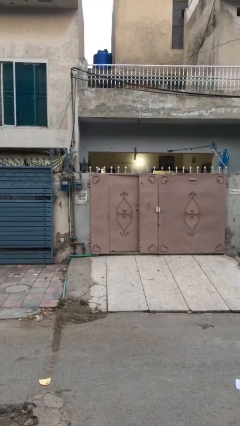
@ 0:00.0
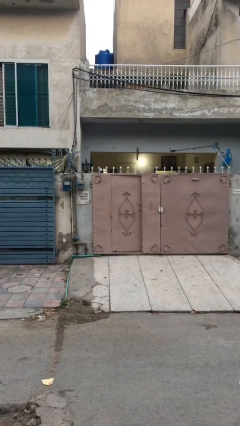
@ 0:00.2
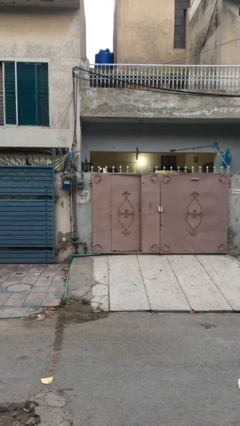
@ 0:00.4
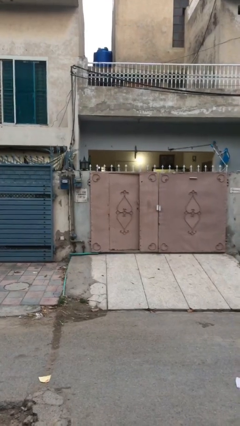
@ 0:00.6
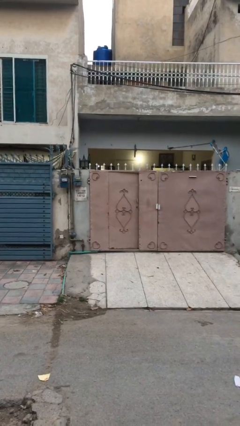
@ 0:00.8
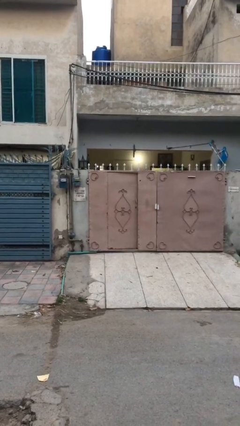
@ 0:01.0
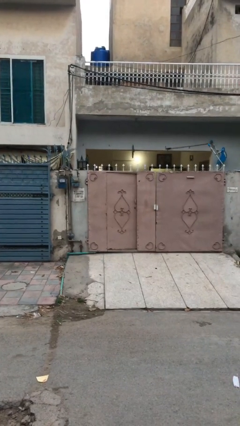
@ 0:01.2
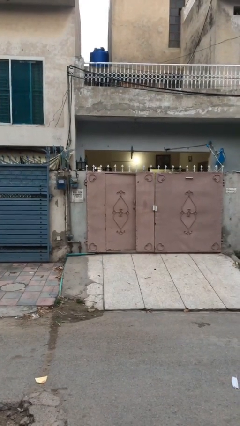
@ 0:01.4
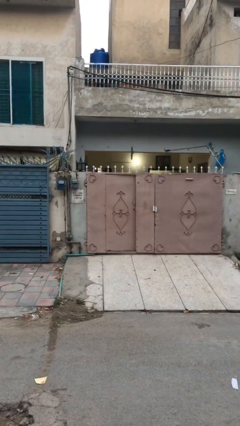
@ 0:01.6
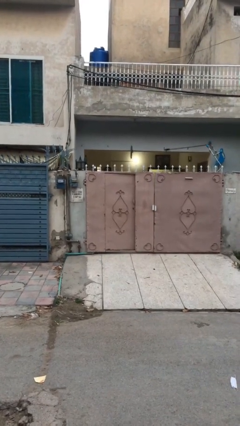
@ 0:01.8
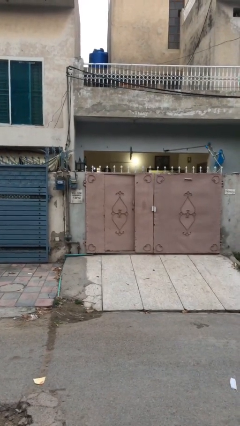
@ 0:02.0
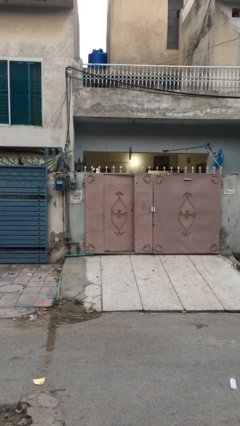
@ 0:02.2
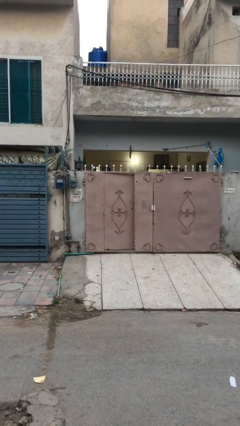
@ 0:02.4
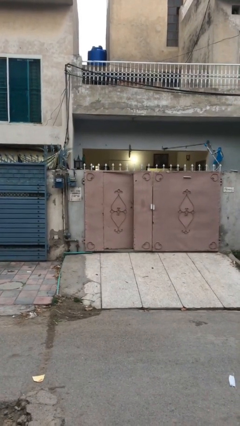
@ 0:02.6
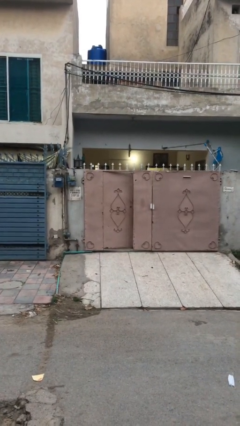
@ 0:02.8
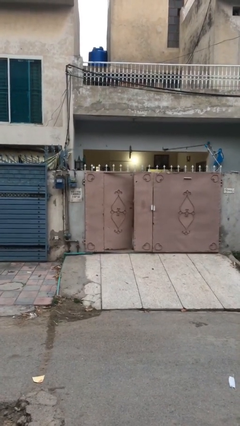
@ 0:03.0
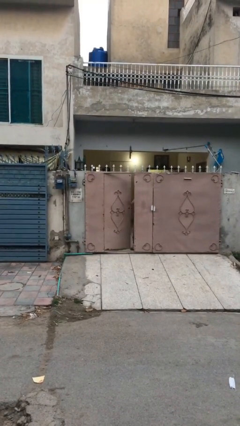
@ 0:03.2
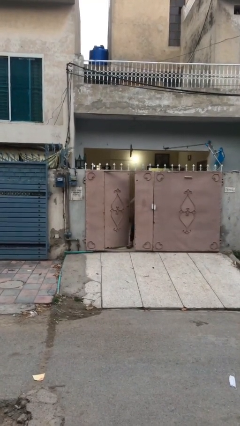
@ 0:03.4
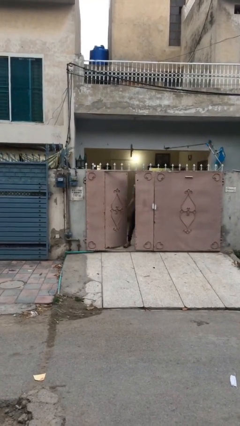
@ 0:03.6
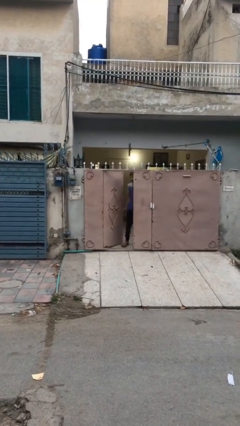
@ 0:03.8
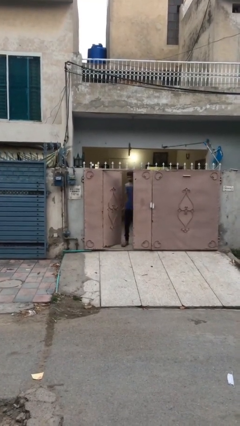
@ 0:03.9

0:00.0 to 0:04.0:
person opens facility door

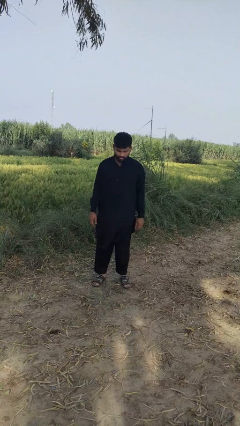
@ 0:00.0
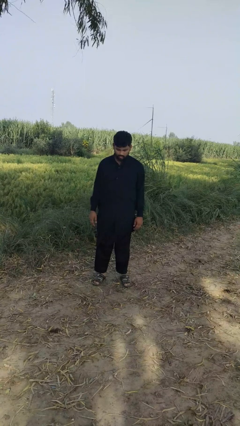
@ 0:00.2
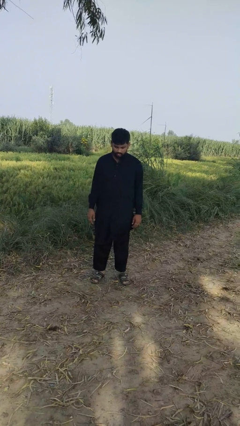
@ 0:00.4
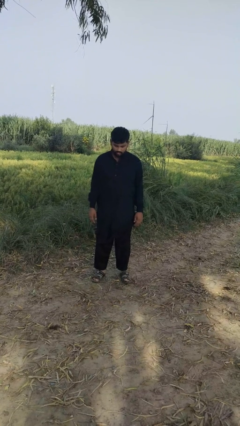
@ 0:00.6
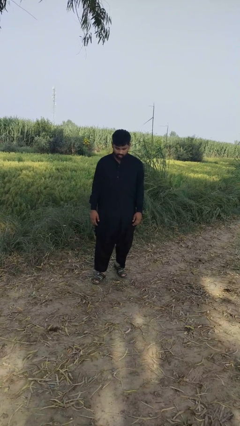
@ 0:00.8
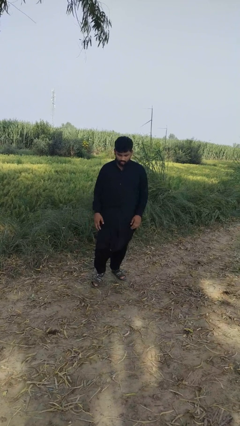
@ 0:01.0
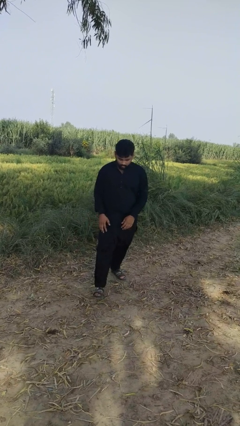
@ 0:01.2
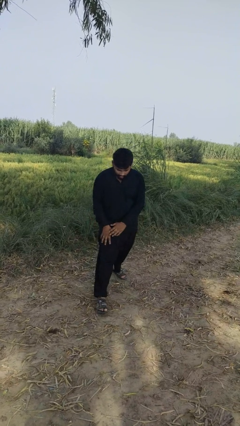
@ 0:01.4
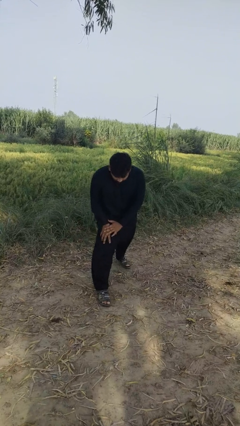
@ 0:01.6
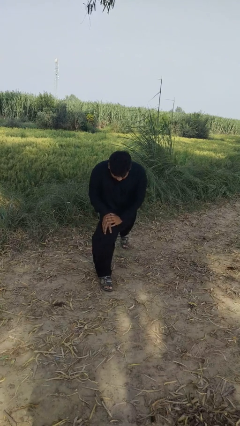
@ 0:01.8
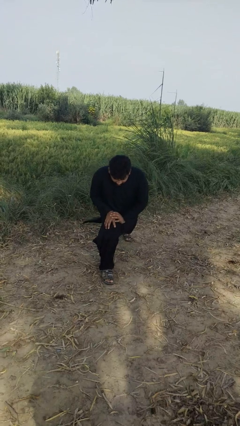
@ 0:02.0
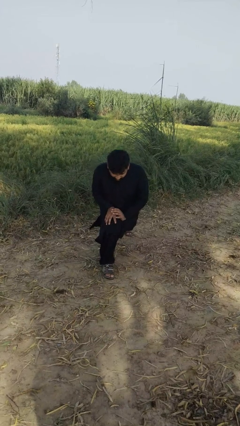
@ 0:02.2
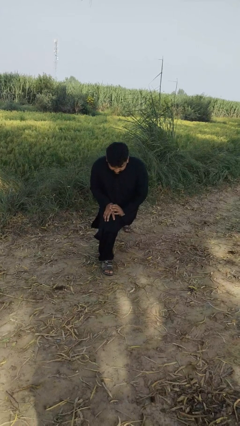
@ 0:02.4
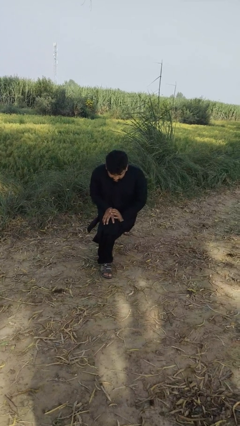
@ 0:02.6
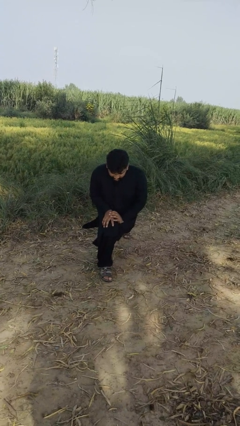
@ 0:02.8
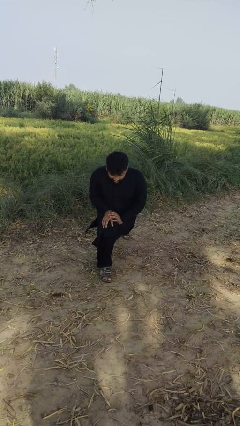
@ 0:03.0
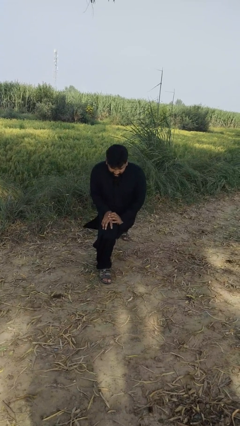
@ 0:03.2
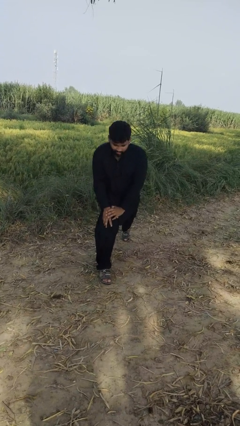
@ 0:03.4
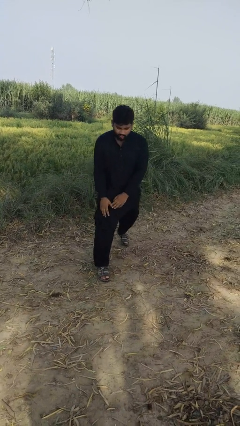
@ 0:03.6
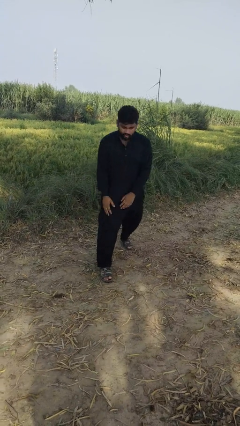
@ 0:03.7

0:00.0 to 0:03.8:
person exercises with lunges

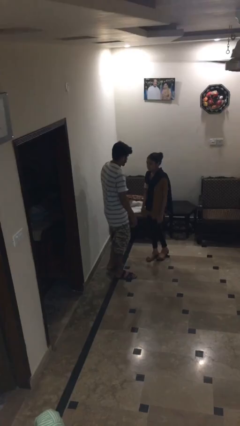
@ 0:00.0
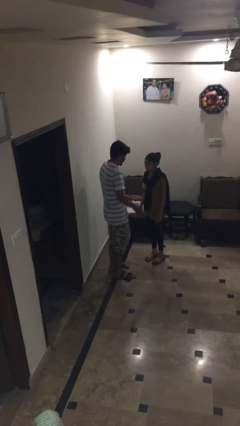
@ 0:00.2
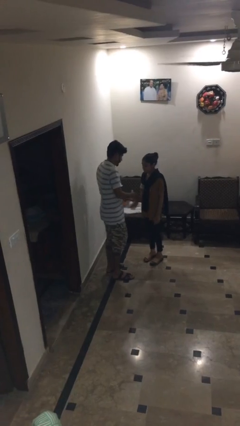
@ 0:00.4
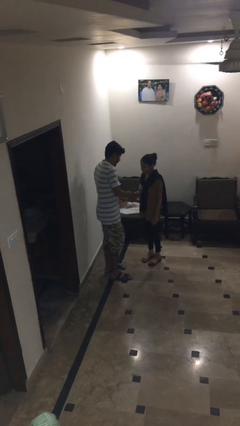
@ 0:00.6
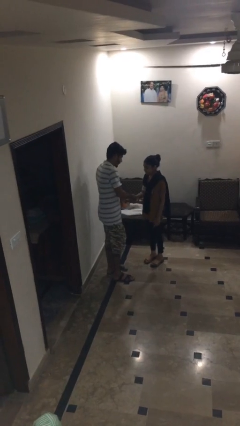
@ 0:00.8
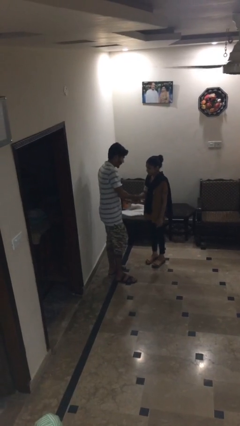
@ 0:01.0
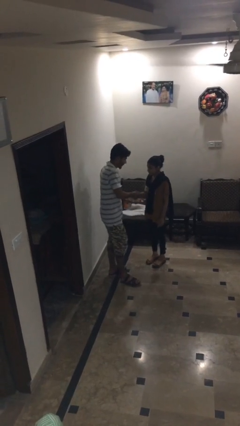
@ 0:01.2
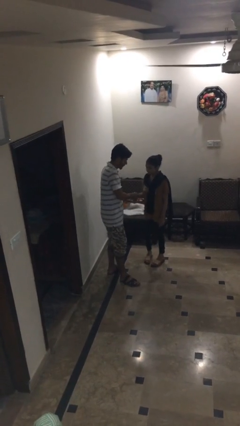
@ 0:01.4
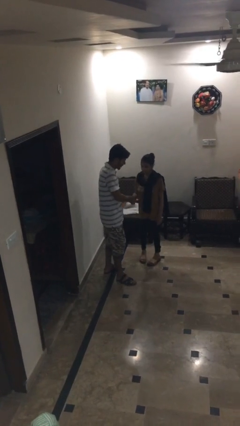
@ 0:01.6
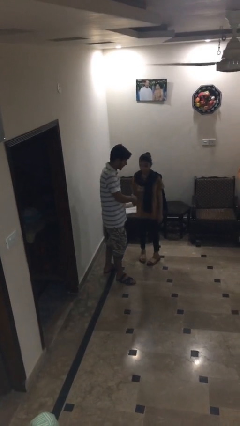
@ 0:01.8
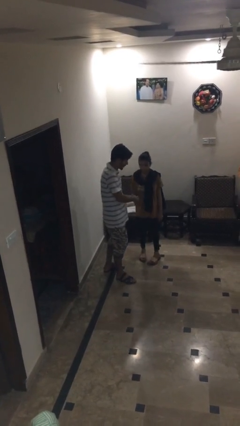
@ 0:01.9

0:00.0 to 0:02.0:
person shakes hand

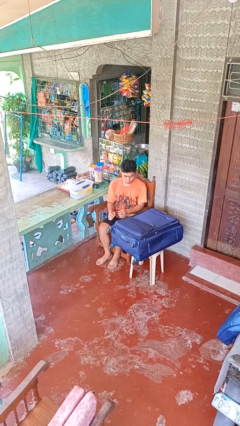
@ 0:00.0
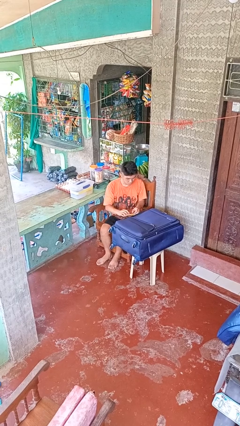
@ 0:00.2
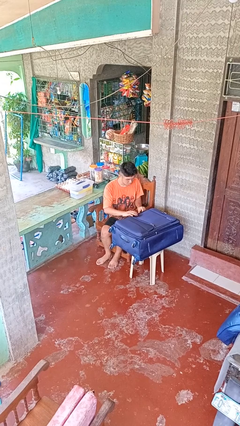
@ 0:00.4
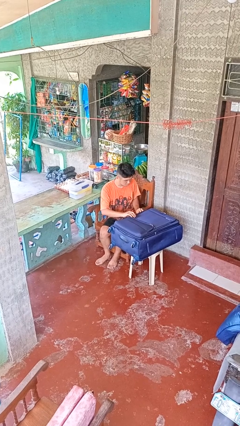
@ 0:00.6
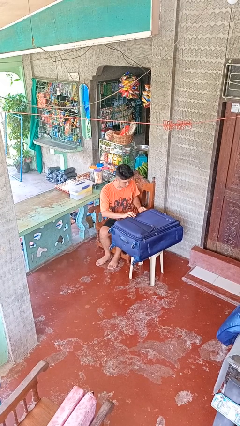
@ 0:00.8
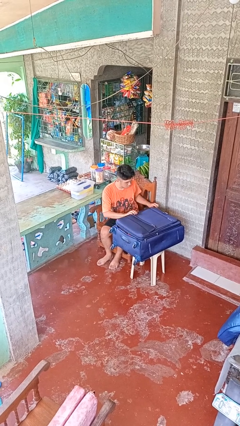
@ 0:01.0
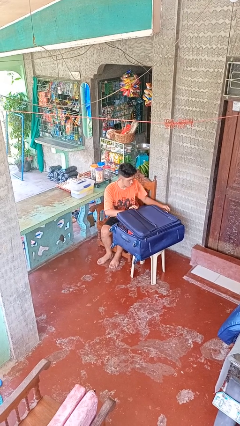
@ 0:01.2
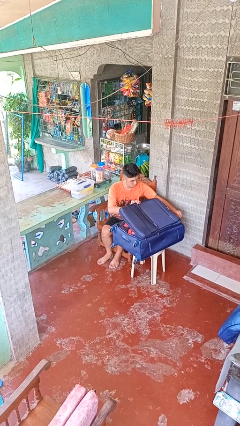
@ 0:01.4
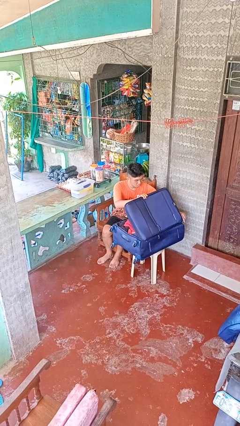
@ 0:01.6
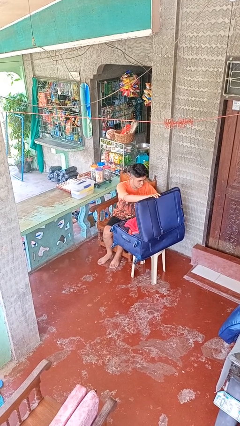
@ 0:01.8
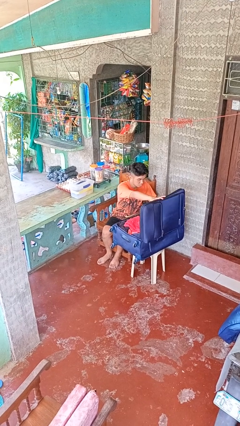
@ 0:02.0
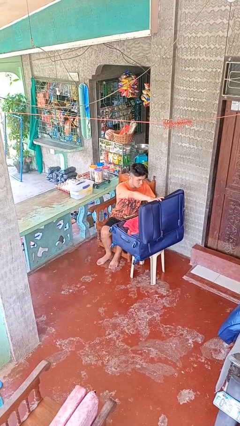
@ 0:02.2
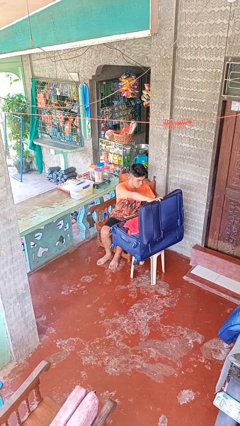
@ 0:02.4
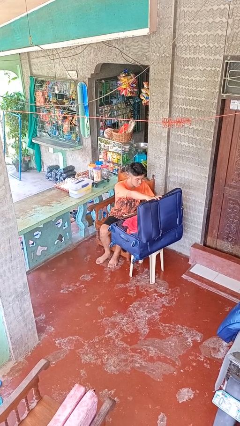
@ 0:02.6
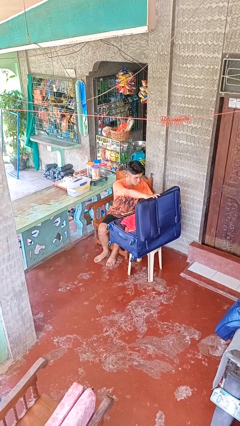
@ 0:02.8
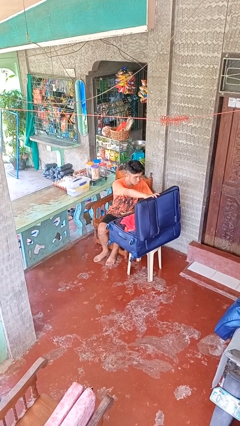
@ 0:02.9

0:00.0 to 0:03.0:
person opens suitcase

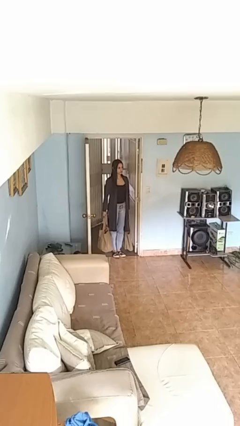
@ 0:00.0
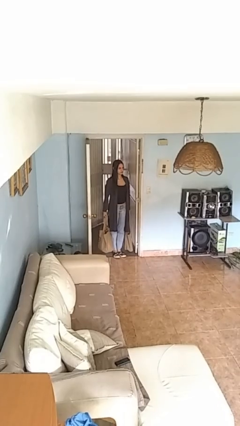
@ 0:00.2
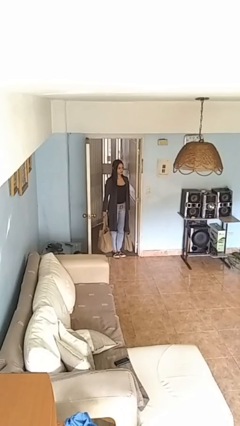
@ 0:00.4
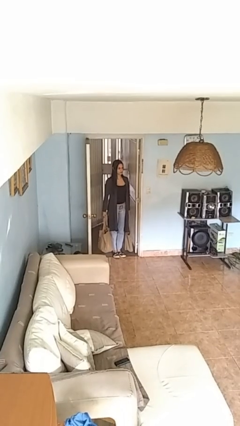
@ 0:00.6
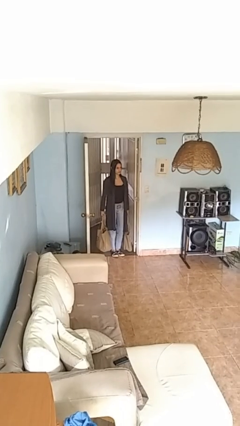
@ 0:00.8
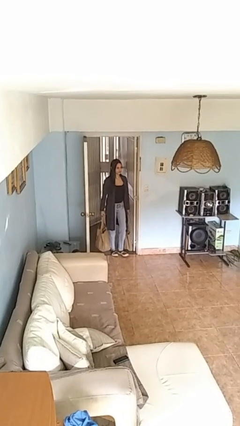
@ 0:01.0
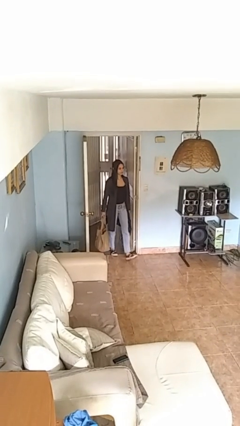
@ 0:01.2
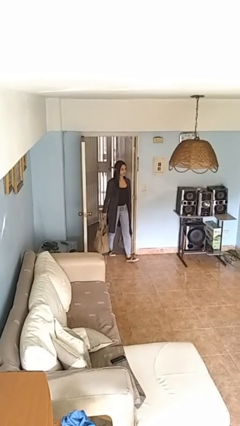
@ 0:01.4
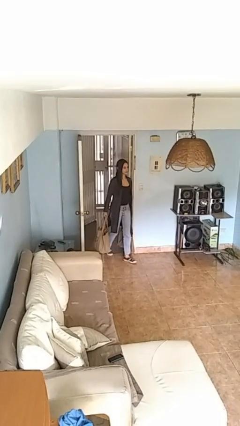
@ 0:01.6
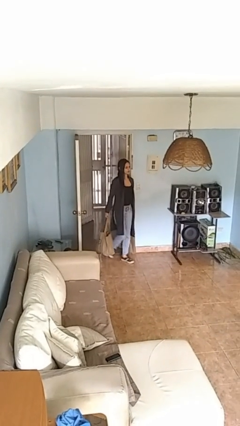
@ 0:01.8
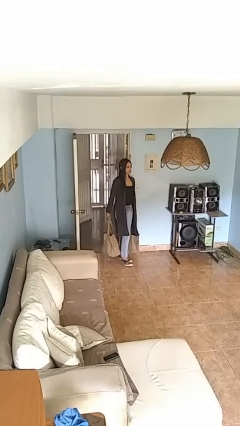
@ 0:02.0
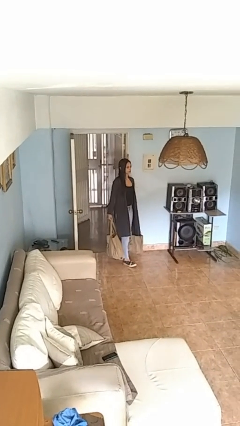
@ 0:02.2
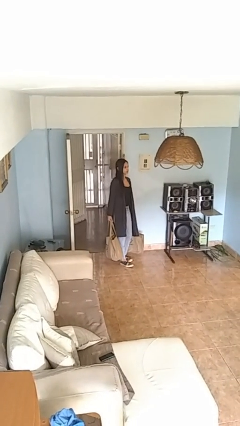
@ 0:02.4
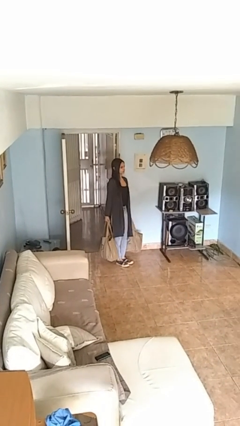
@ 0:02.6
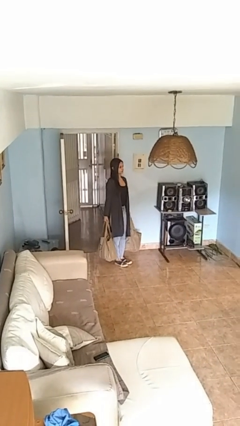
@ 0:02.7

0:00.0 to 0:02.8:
person carries groceries

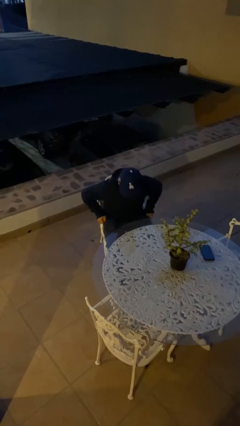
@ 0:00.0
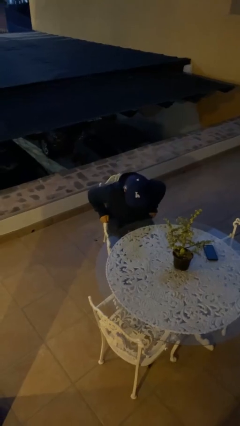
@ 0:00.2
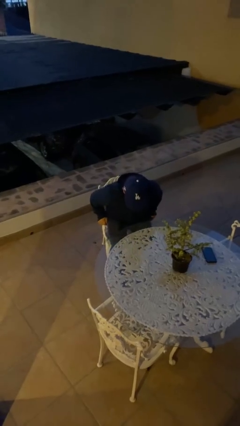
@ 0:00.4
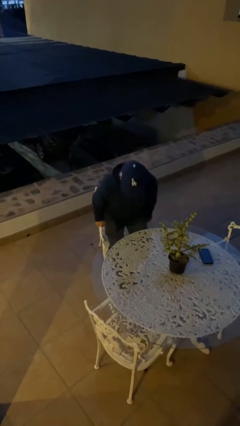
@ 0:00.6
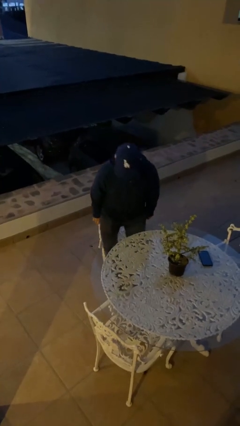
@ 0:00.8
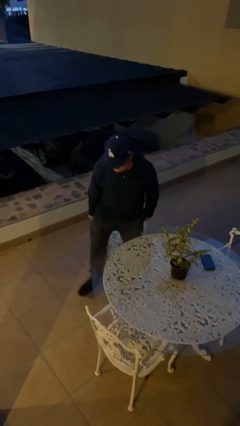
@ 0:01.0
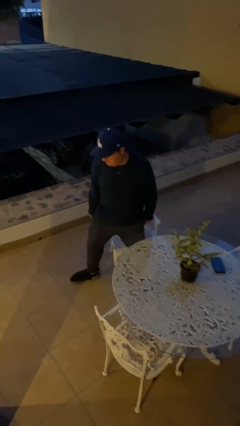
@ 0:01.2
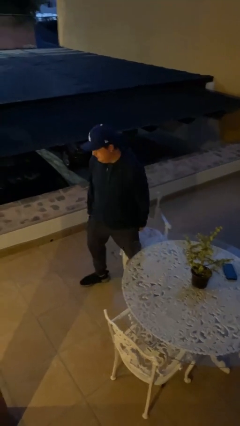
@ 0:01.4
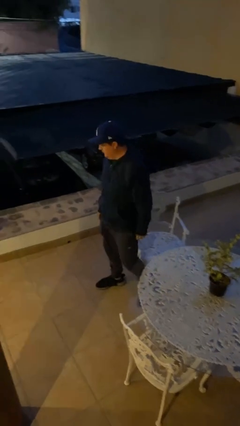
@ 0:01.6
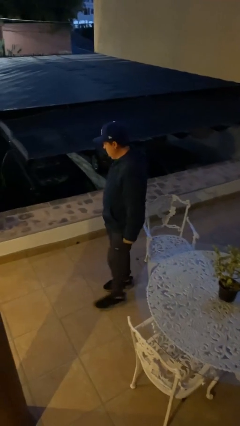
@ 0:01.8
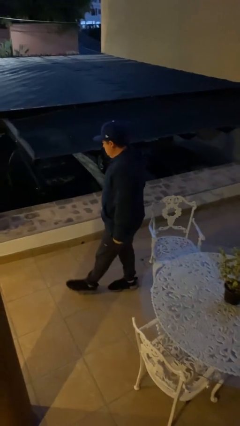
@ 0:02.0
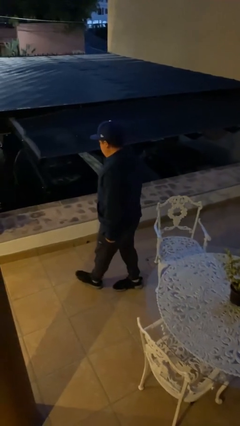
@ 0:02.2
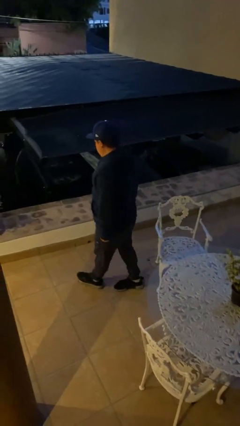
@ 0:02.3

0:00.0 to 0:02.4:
person stands up
